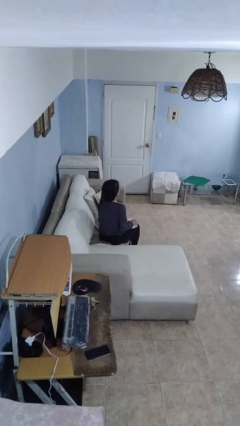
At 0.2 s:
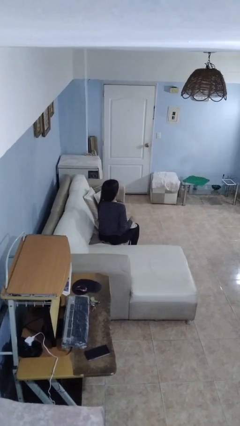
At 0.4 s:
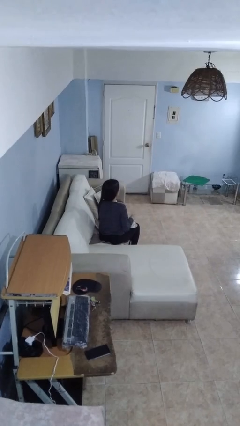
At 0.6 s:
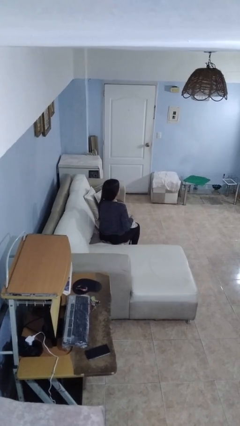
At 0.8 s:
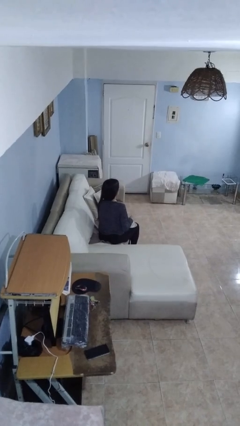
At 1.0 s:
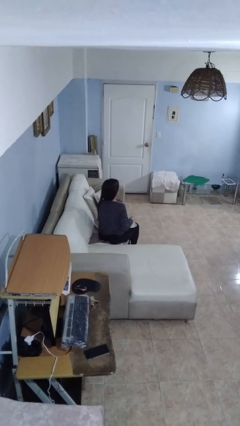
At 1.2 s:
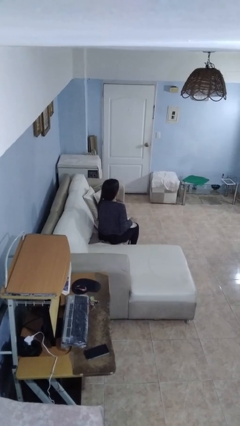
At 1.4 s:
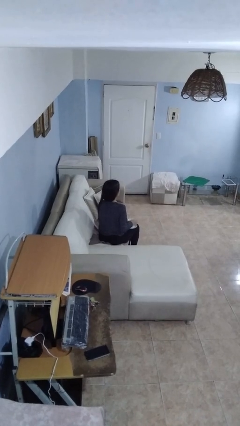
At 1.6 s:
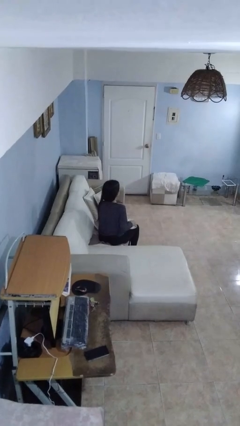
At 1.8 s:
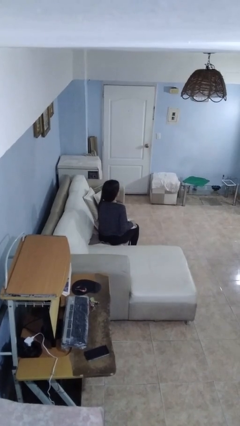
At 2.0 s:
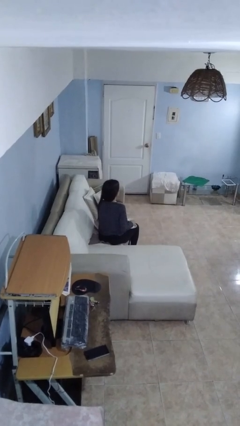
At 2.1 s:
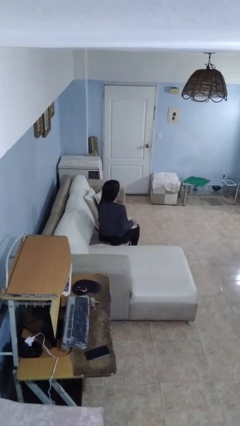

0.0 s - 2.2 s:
person stirs mug

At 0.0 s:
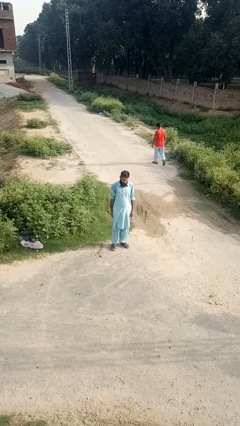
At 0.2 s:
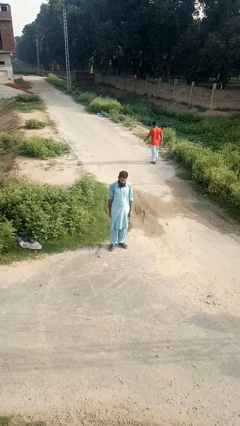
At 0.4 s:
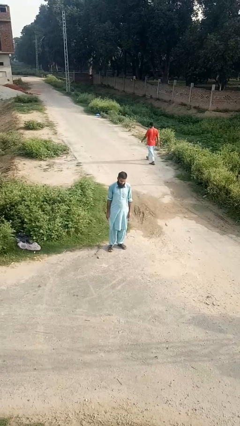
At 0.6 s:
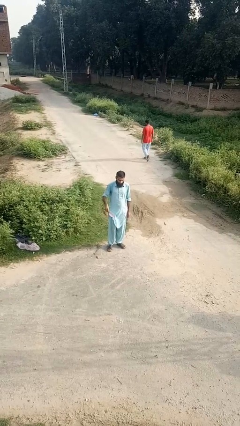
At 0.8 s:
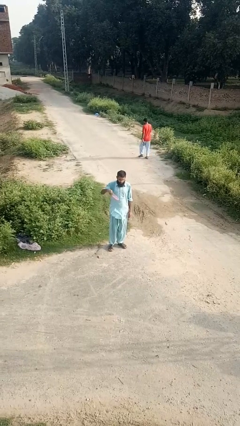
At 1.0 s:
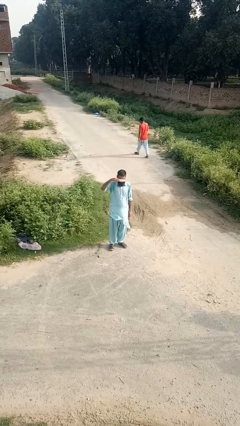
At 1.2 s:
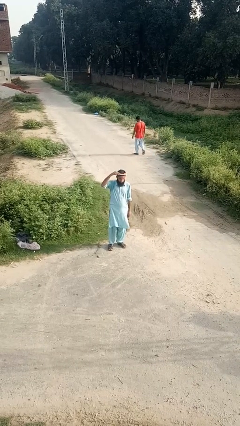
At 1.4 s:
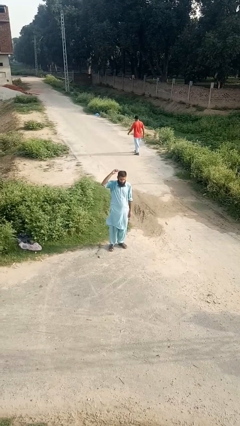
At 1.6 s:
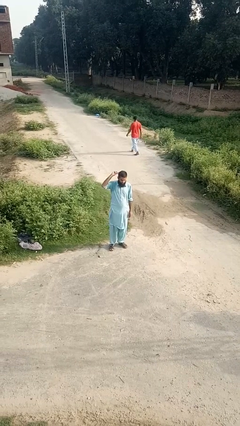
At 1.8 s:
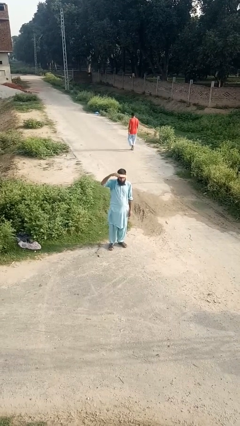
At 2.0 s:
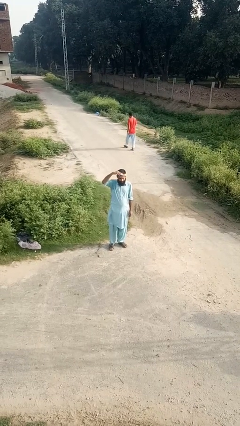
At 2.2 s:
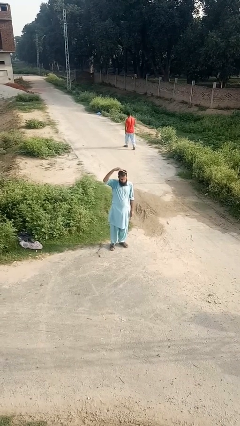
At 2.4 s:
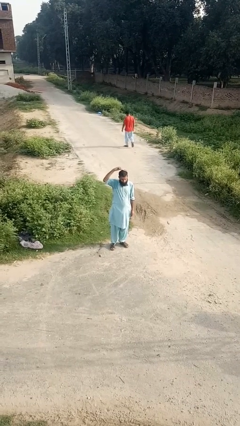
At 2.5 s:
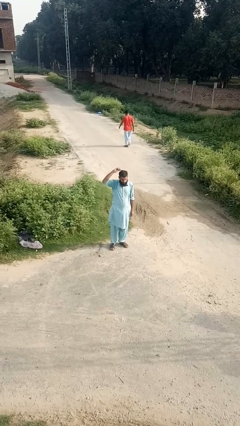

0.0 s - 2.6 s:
person brushes hair

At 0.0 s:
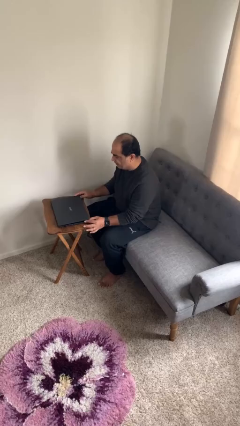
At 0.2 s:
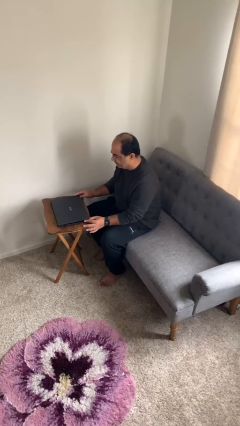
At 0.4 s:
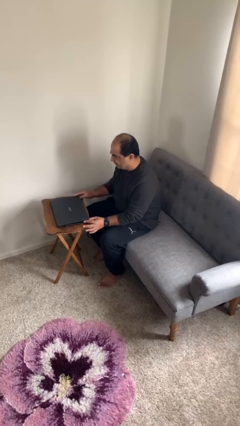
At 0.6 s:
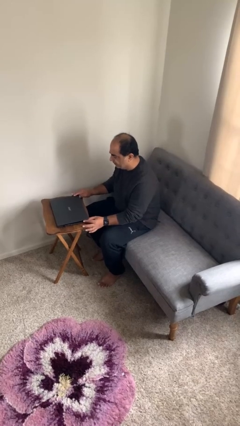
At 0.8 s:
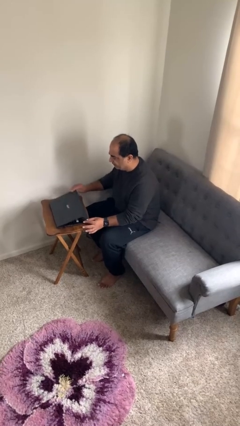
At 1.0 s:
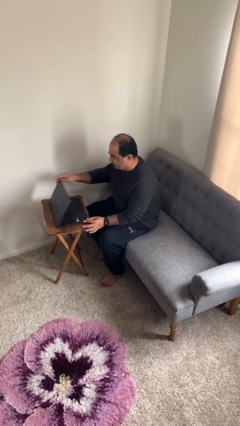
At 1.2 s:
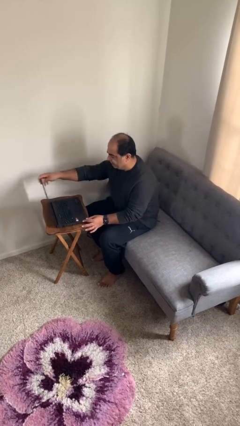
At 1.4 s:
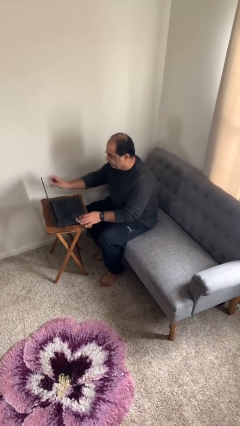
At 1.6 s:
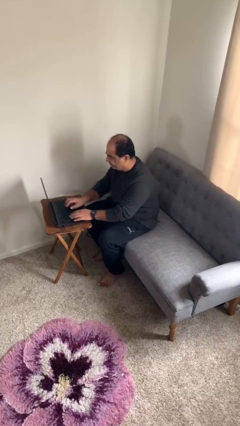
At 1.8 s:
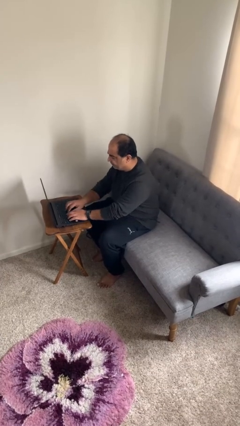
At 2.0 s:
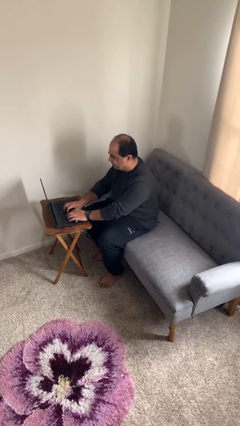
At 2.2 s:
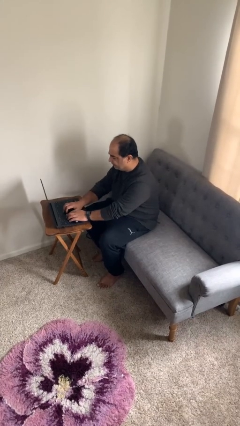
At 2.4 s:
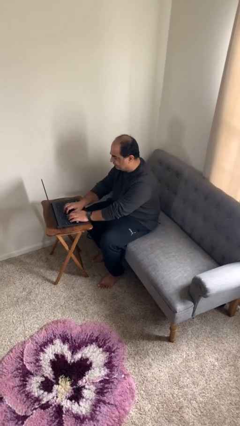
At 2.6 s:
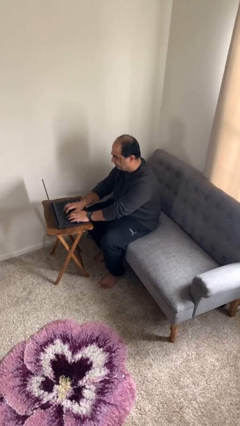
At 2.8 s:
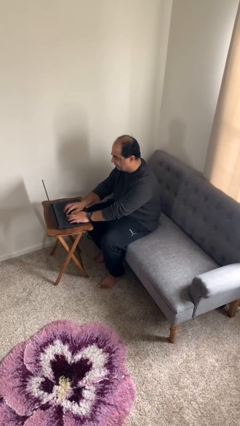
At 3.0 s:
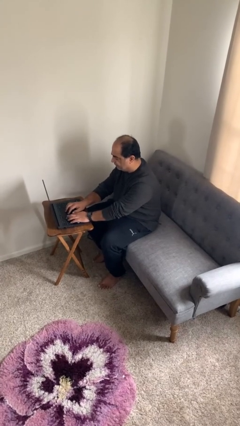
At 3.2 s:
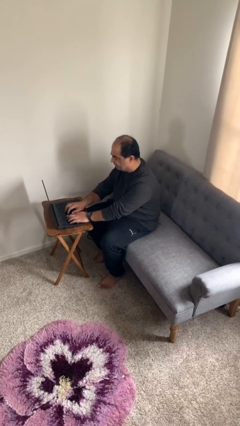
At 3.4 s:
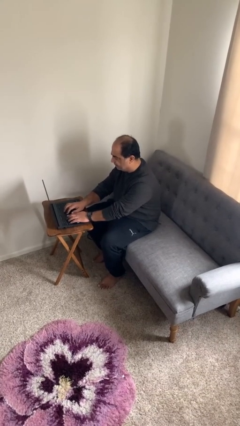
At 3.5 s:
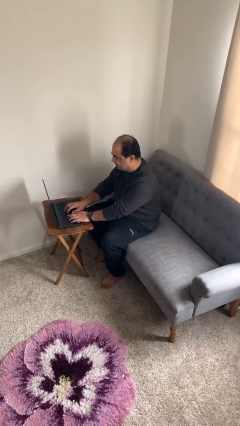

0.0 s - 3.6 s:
person interacts with laptop

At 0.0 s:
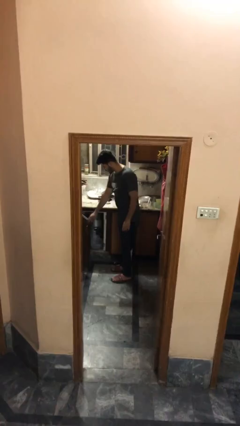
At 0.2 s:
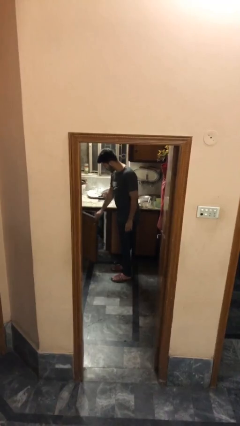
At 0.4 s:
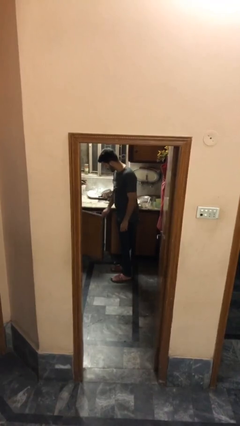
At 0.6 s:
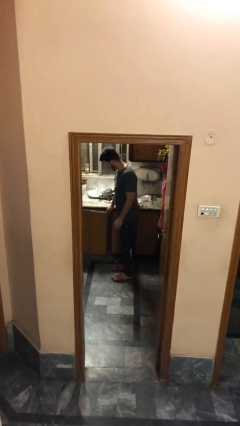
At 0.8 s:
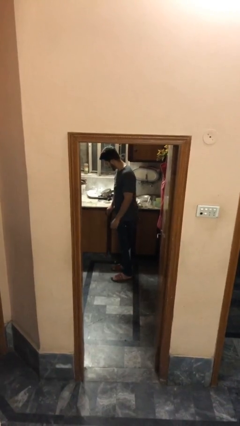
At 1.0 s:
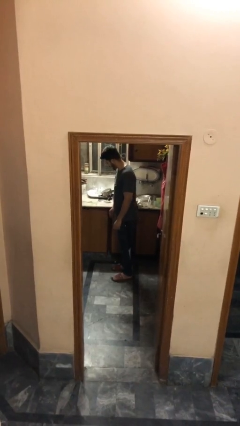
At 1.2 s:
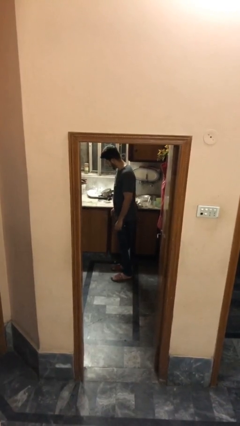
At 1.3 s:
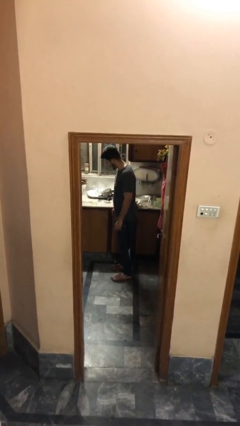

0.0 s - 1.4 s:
person closes cabinet

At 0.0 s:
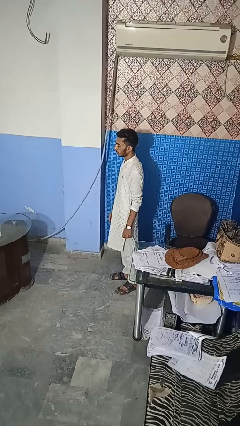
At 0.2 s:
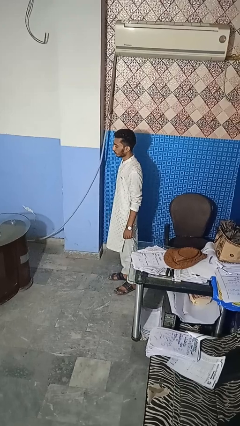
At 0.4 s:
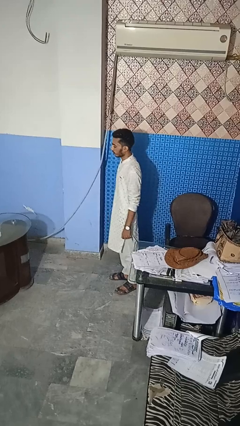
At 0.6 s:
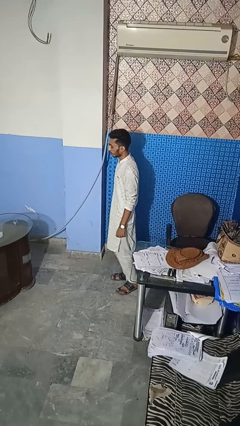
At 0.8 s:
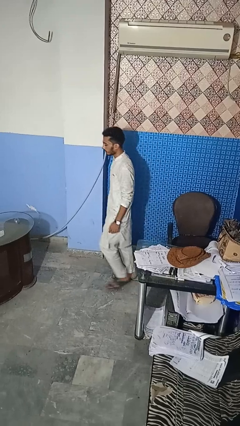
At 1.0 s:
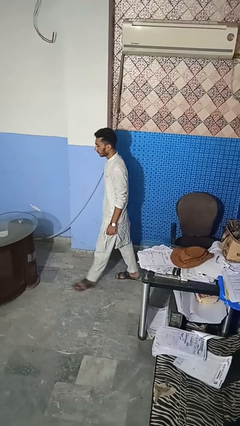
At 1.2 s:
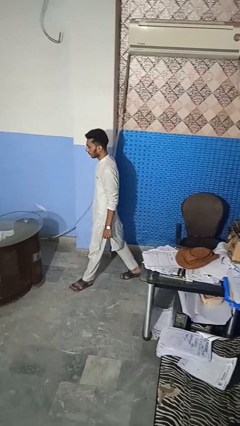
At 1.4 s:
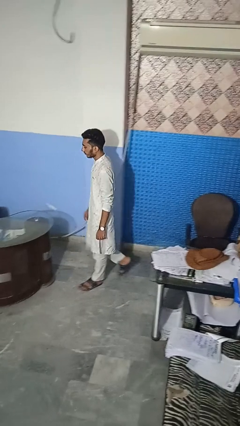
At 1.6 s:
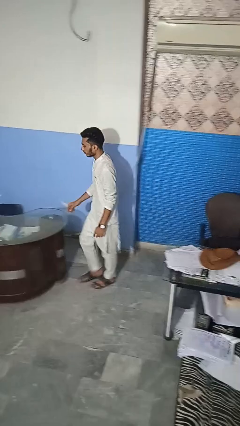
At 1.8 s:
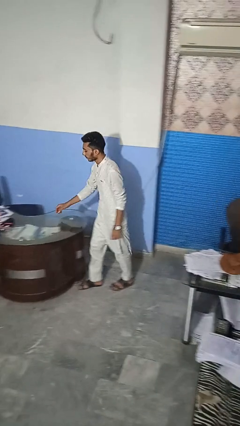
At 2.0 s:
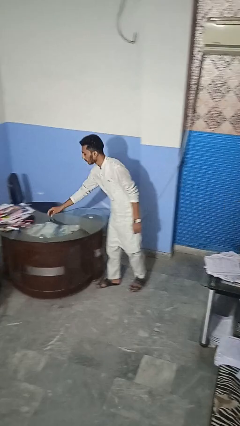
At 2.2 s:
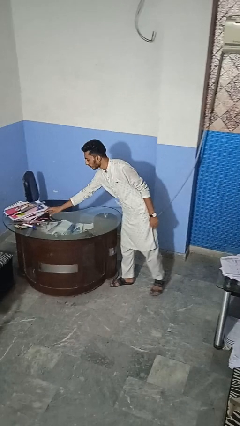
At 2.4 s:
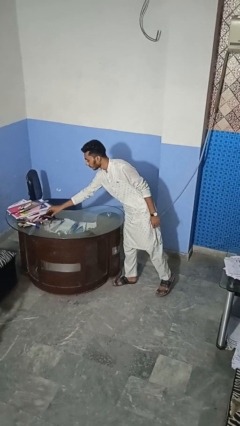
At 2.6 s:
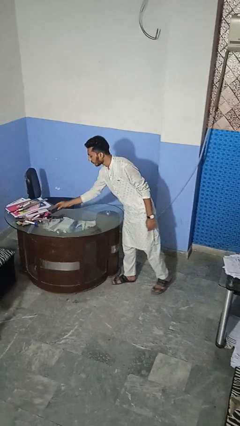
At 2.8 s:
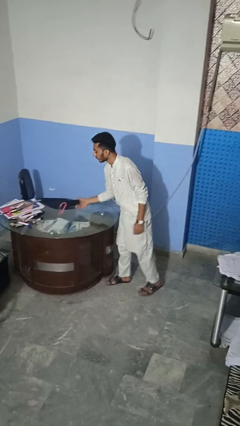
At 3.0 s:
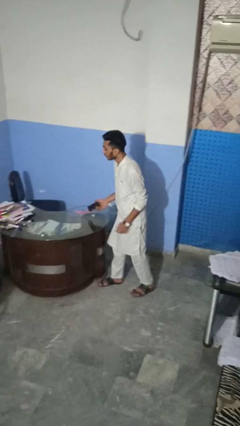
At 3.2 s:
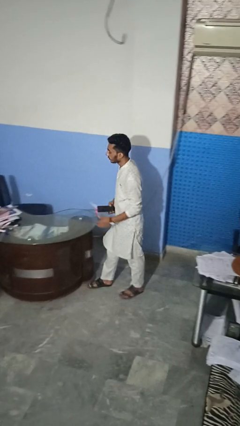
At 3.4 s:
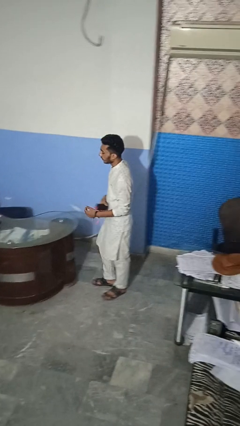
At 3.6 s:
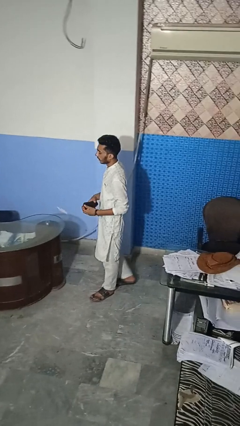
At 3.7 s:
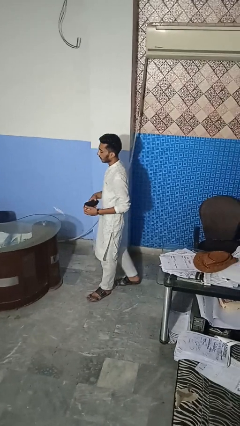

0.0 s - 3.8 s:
person picks up object from table

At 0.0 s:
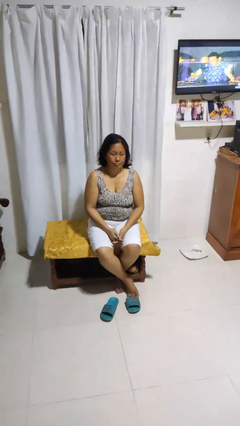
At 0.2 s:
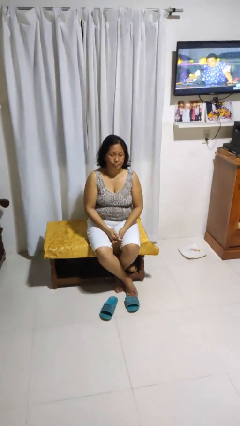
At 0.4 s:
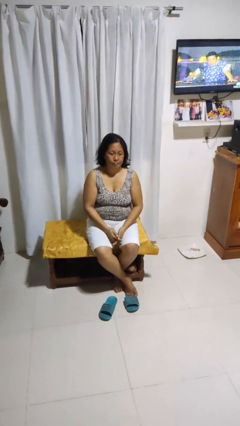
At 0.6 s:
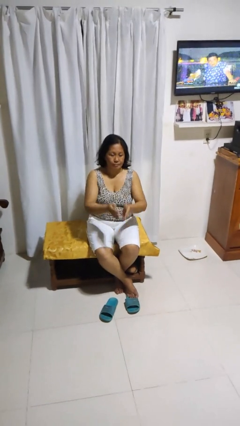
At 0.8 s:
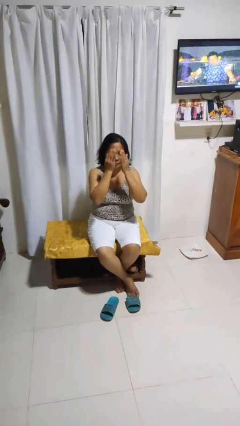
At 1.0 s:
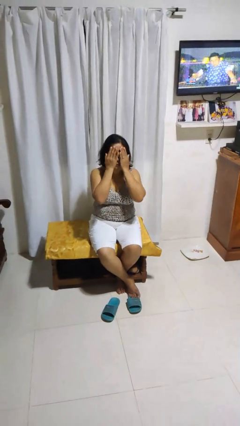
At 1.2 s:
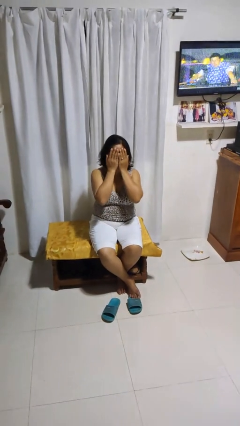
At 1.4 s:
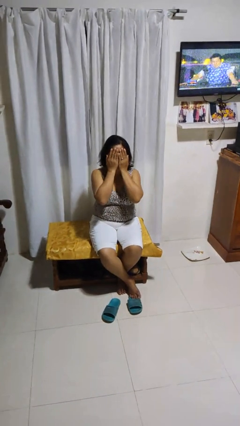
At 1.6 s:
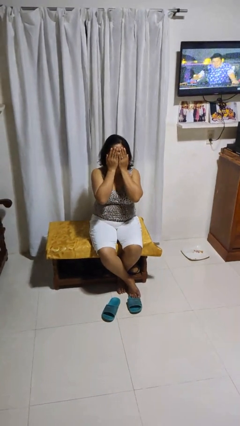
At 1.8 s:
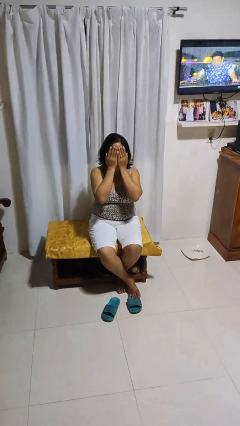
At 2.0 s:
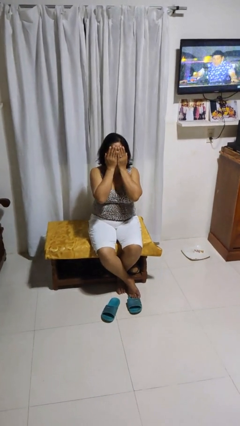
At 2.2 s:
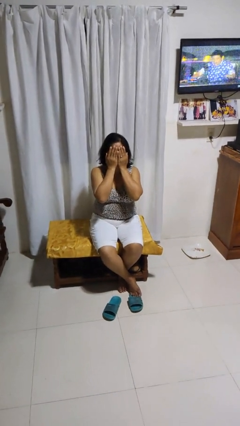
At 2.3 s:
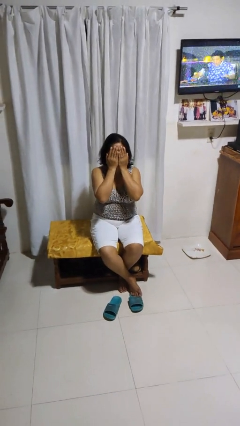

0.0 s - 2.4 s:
person covers face with hands

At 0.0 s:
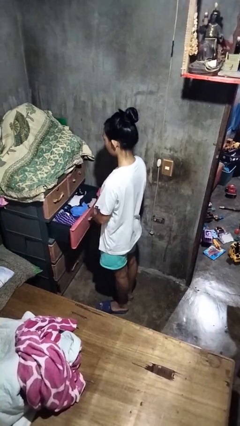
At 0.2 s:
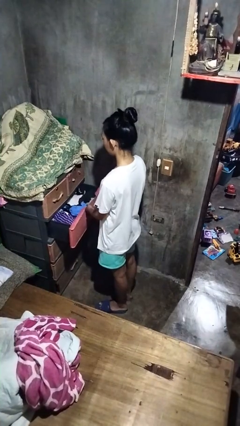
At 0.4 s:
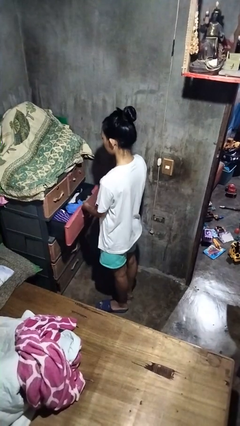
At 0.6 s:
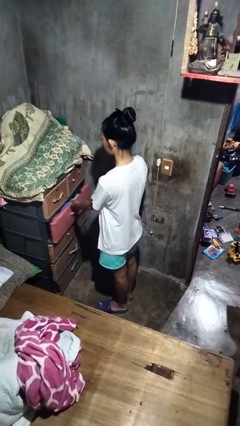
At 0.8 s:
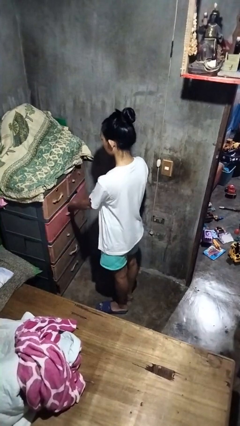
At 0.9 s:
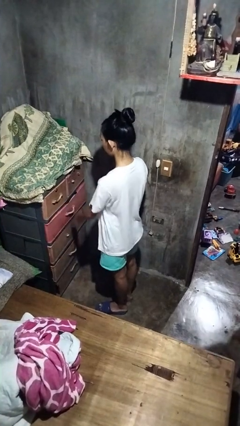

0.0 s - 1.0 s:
person closes dresser drawer

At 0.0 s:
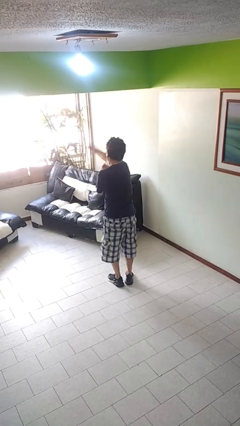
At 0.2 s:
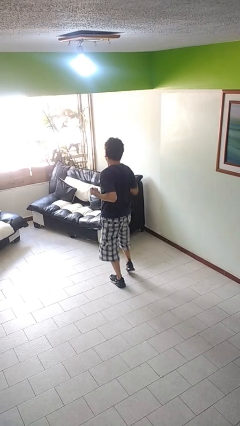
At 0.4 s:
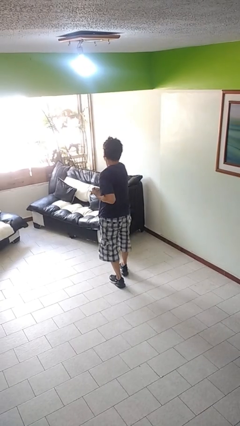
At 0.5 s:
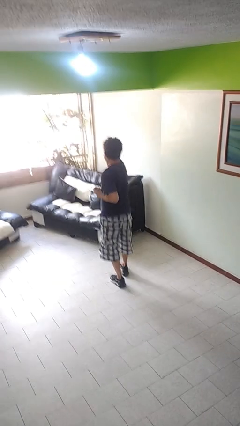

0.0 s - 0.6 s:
person karate chop
